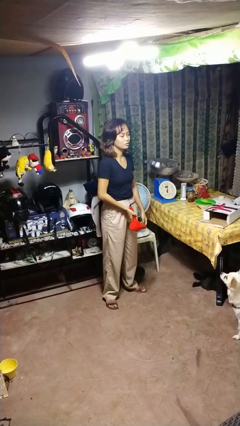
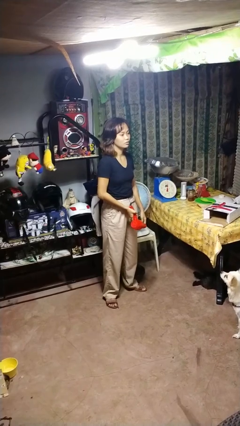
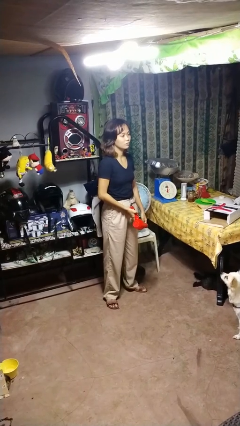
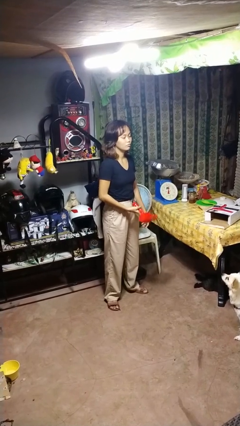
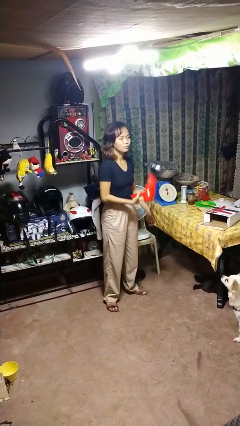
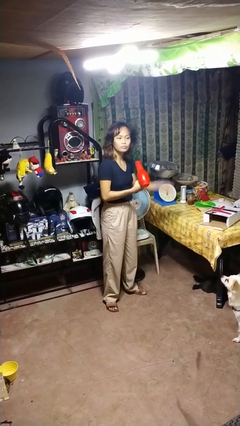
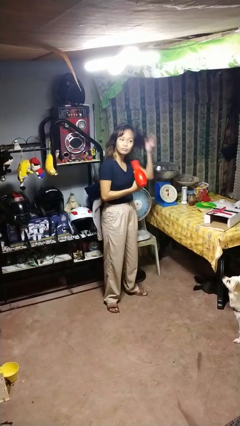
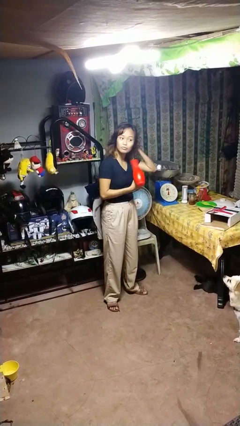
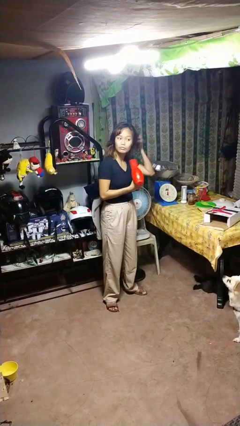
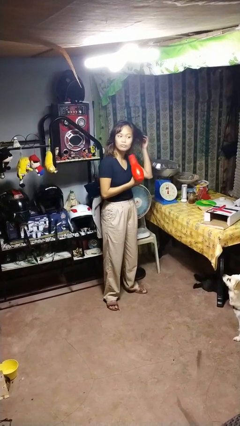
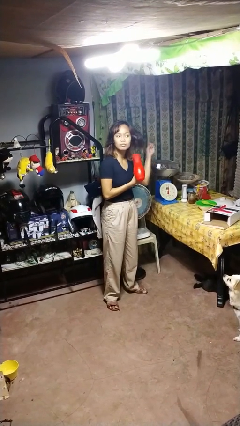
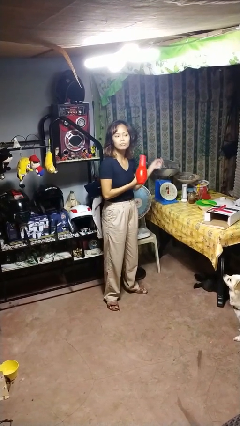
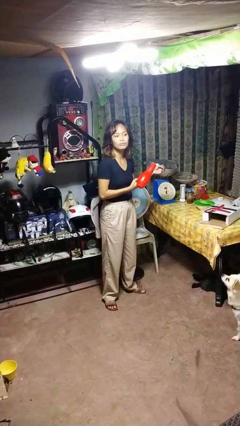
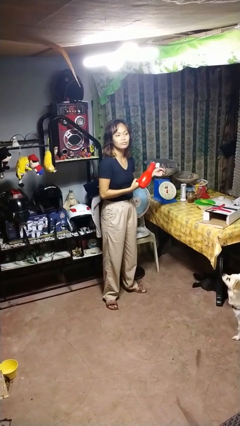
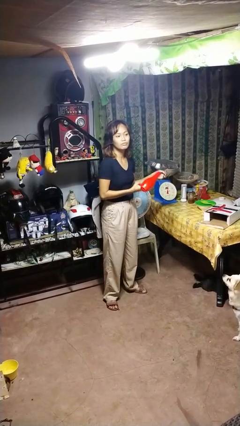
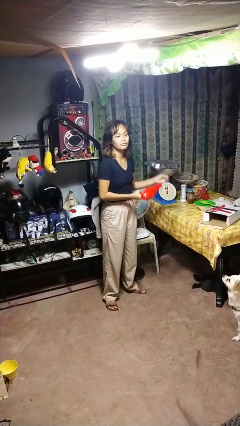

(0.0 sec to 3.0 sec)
person dries hair with hairdryer

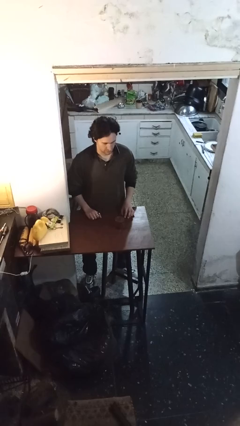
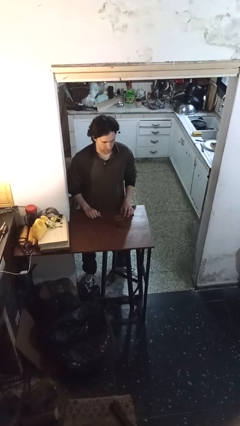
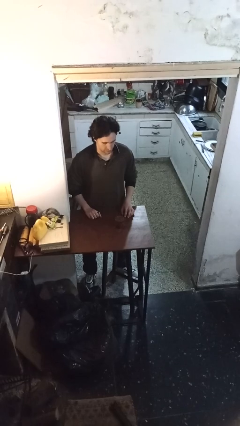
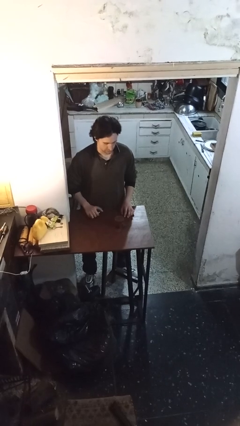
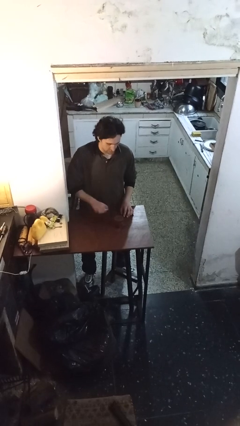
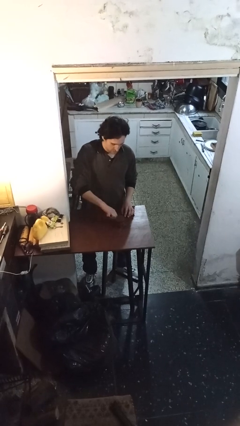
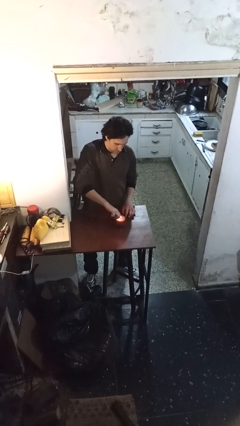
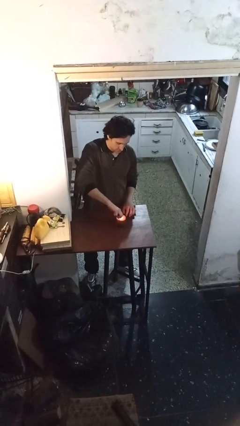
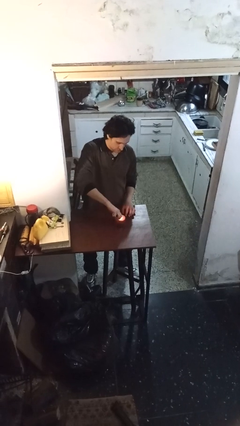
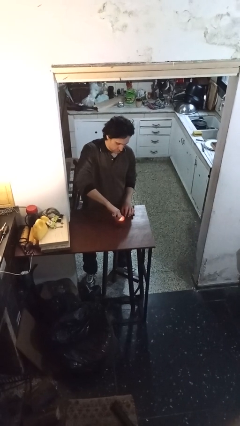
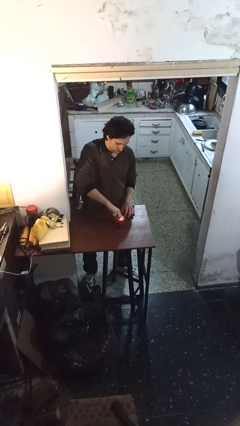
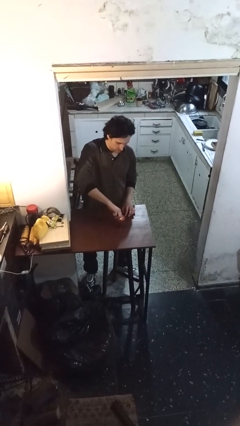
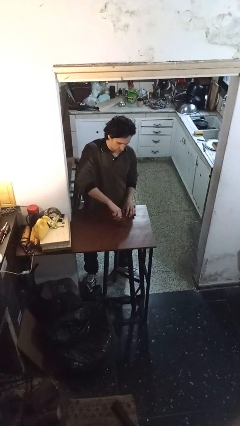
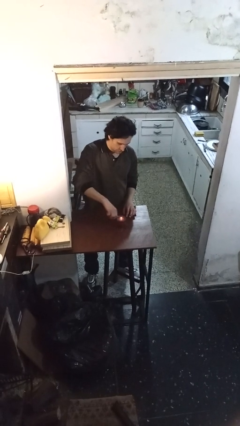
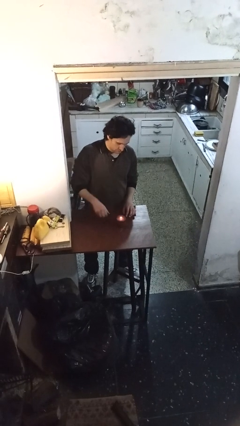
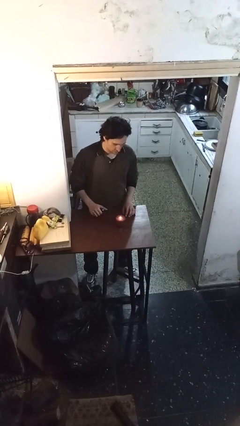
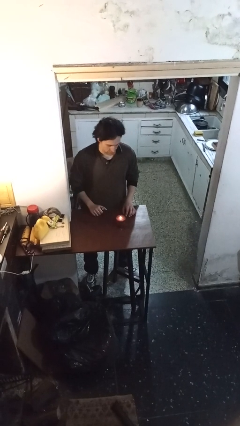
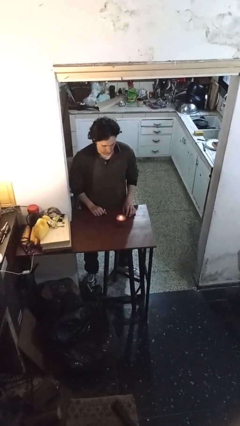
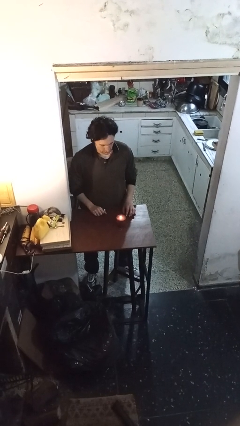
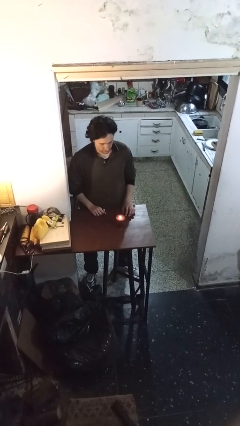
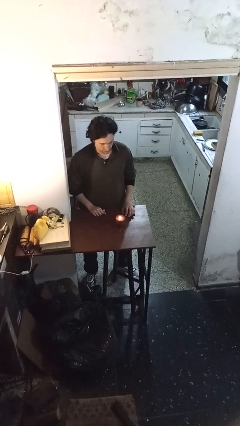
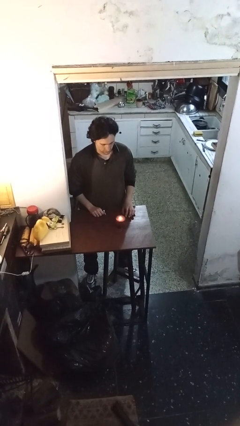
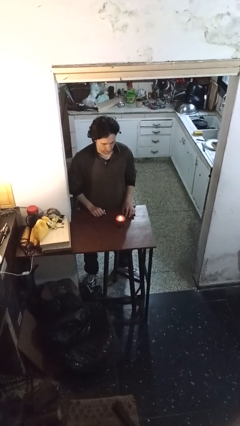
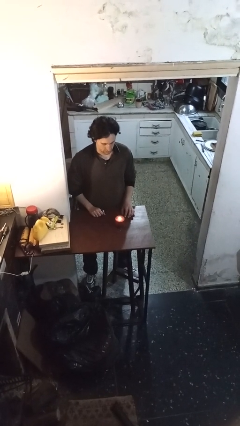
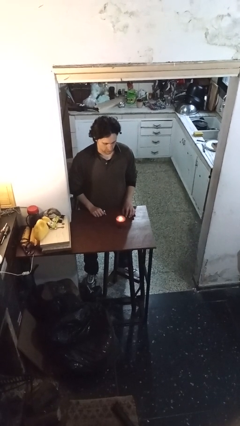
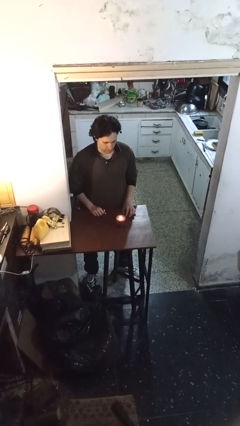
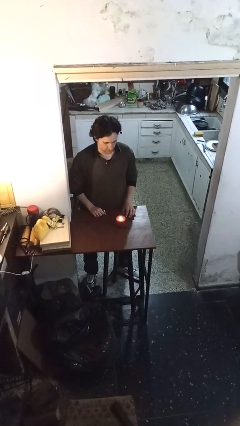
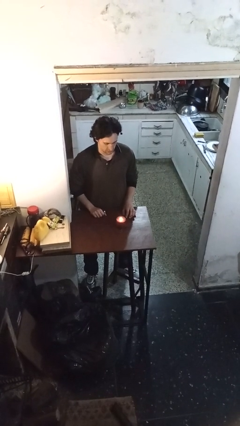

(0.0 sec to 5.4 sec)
person lights candle

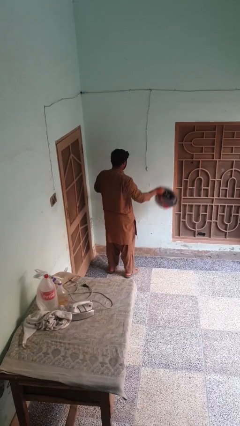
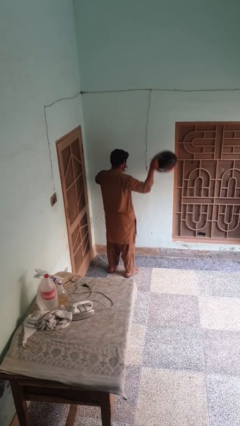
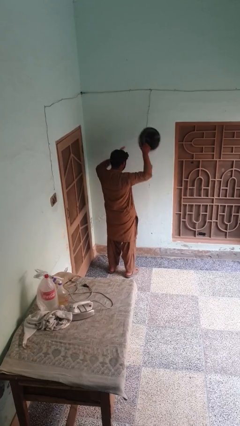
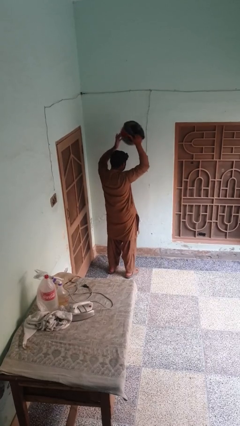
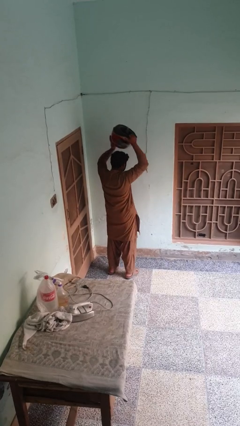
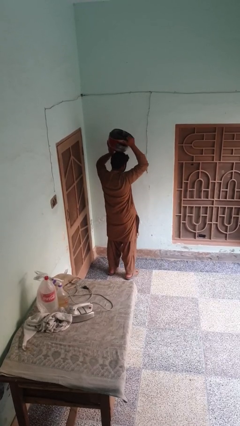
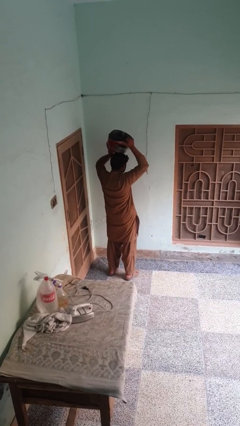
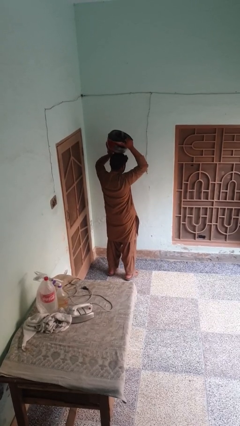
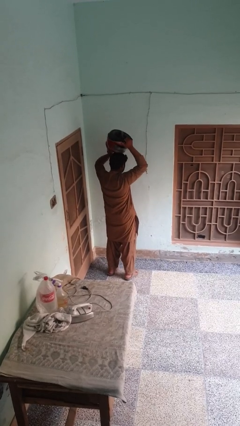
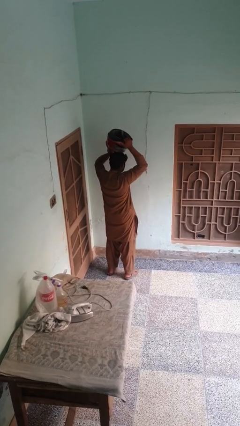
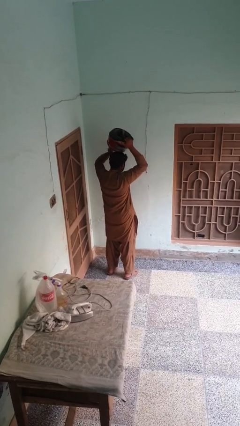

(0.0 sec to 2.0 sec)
person holds object above head

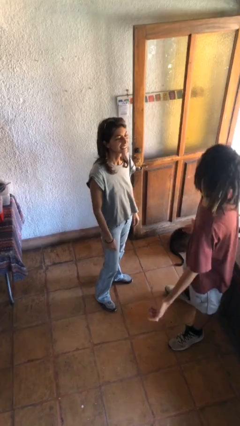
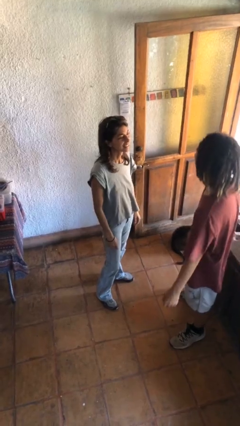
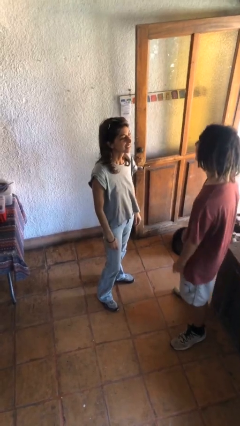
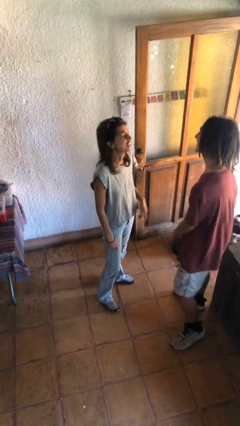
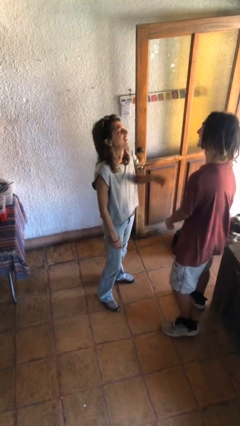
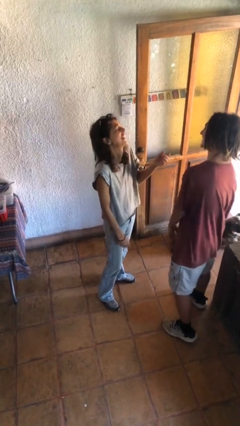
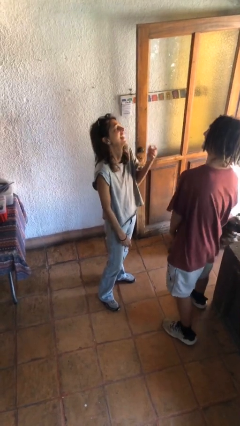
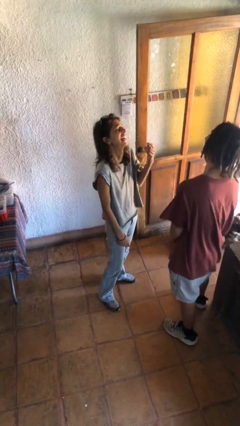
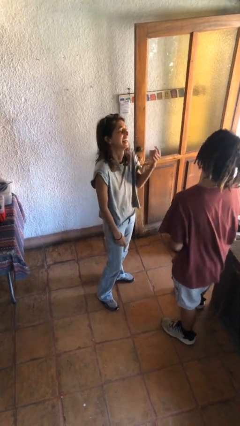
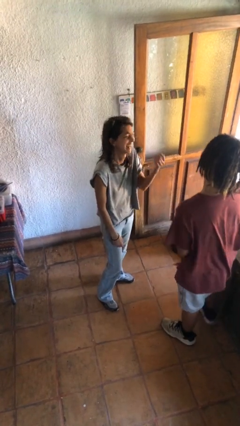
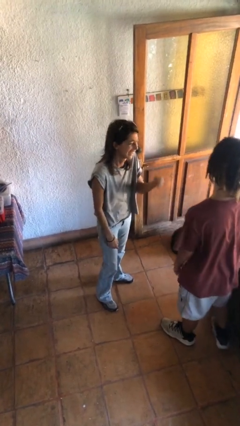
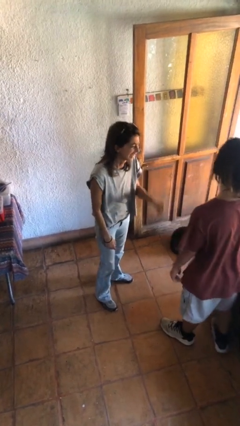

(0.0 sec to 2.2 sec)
person laughs with person

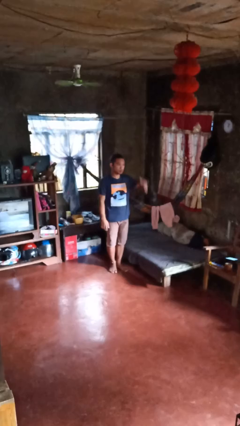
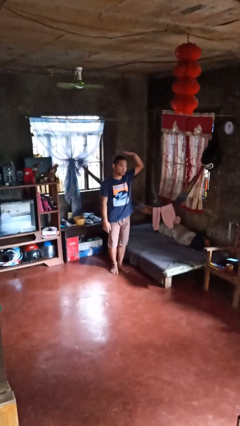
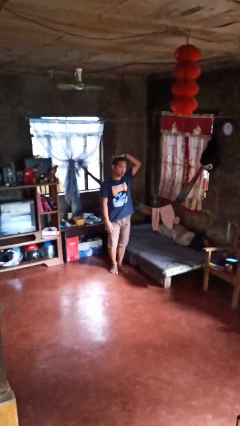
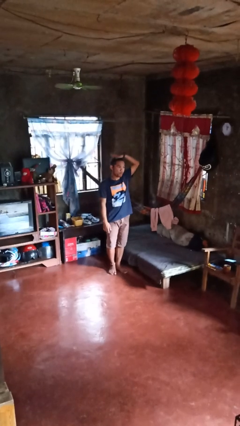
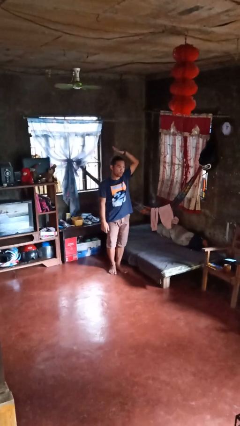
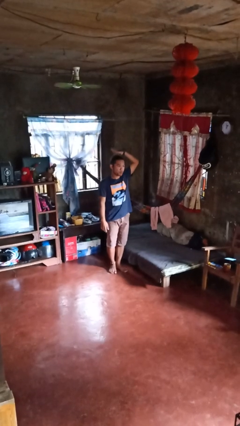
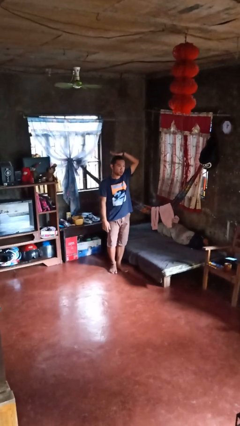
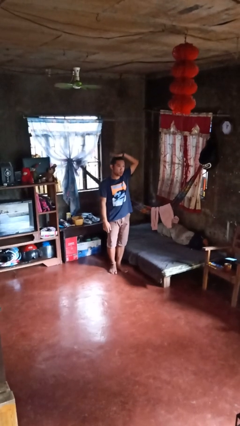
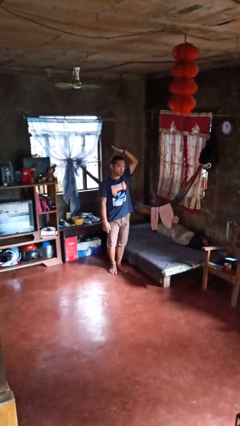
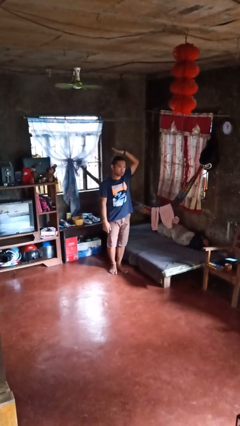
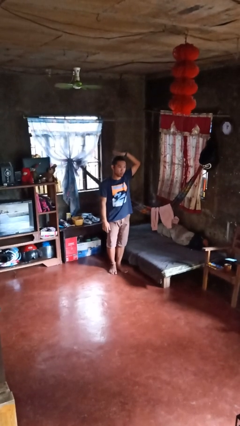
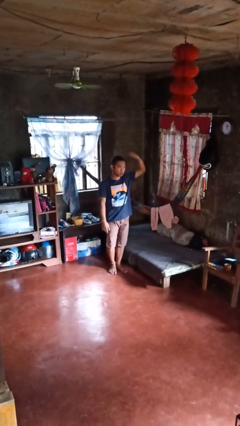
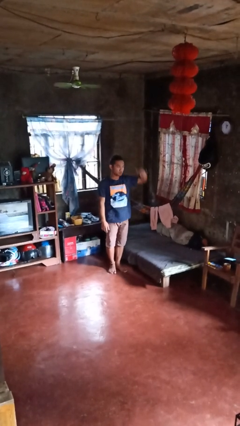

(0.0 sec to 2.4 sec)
person pats head

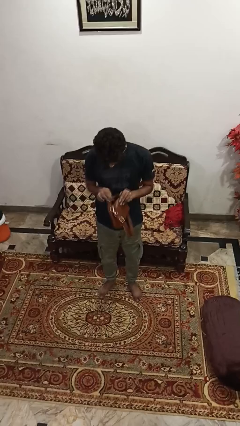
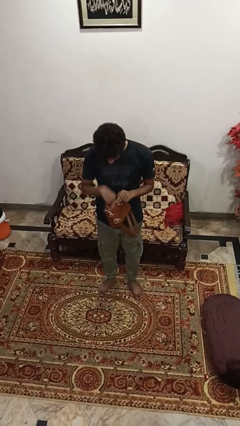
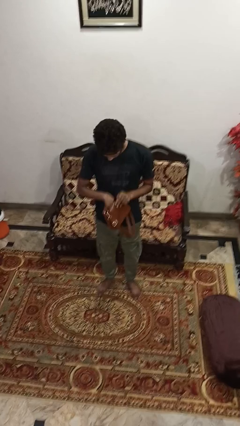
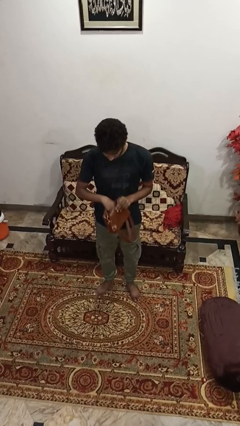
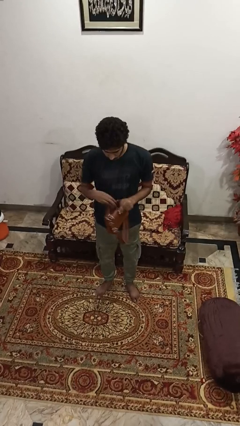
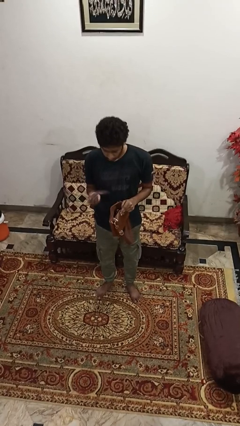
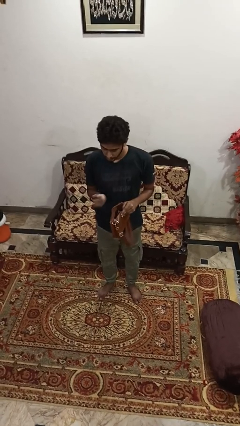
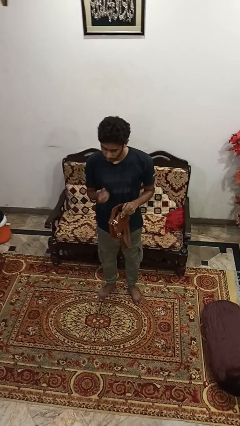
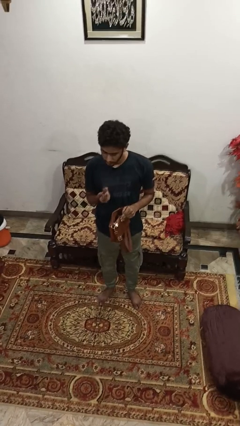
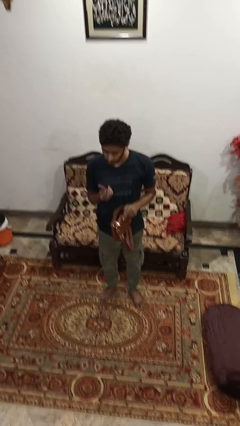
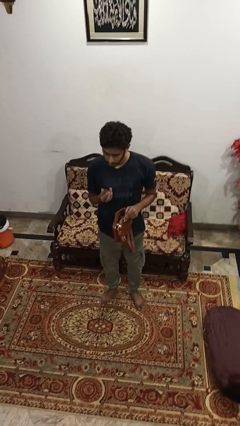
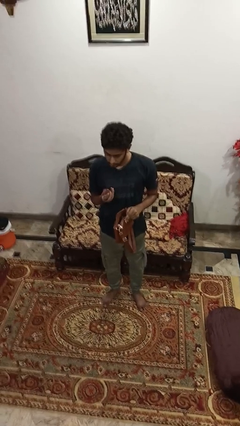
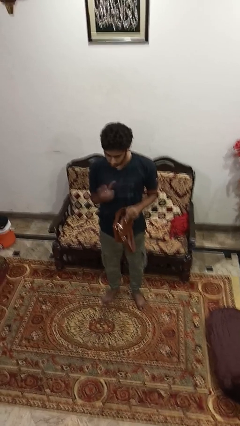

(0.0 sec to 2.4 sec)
person takes object from purse
